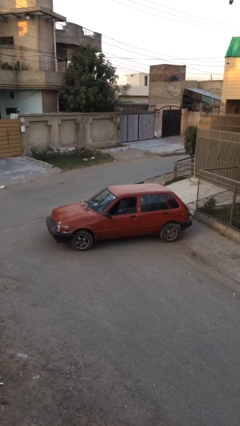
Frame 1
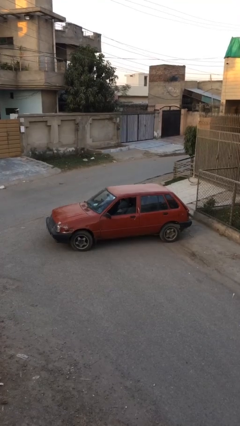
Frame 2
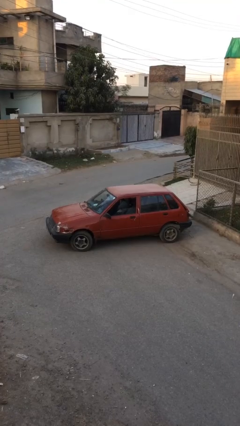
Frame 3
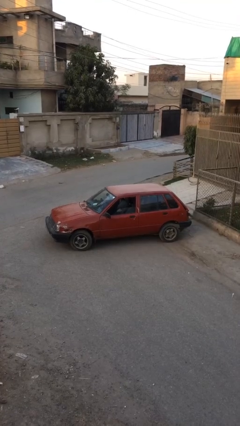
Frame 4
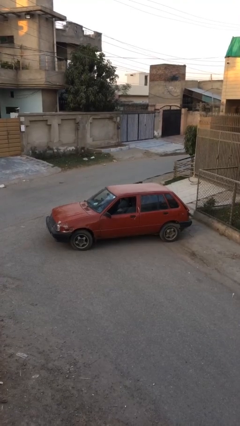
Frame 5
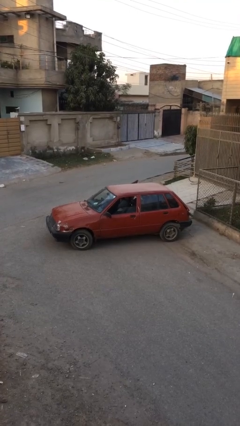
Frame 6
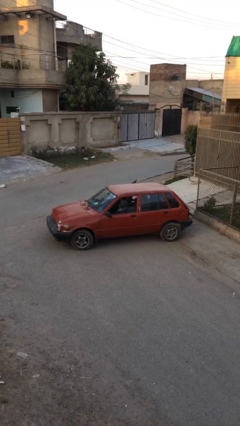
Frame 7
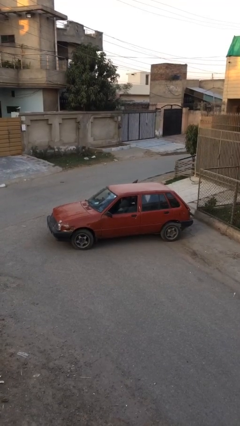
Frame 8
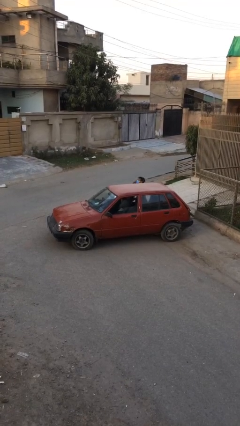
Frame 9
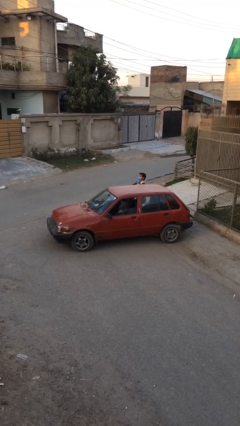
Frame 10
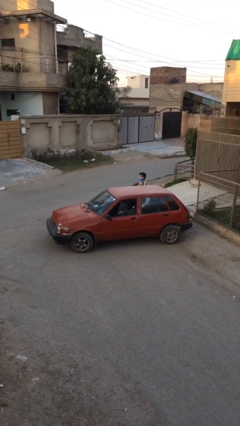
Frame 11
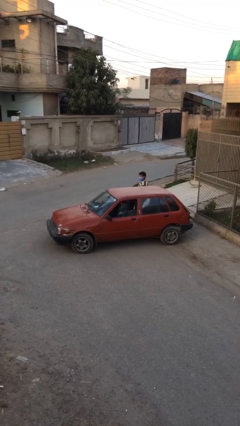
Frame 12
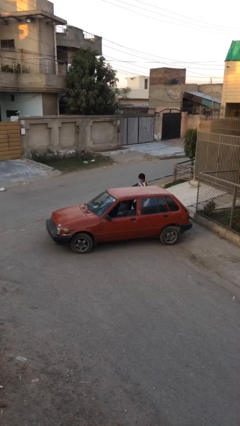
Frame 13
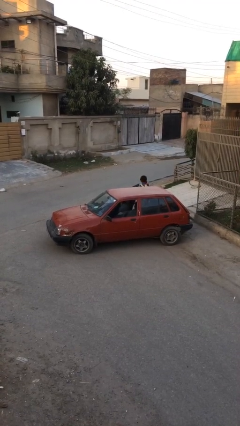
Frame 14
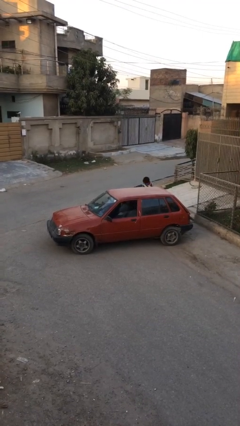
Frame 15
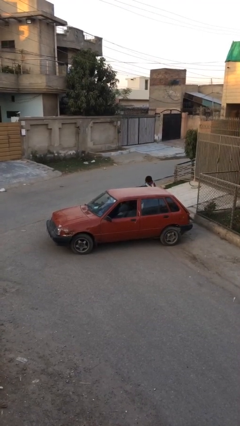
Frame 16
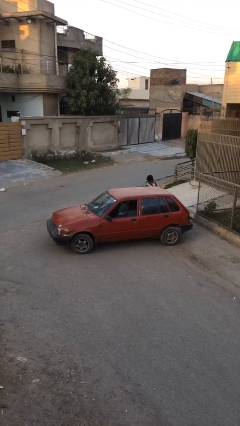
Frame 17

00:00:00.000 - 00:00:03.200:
car drops off person

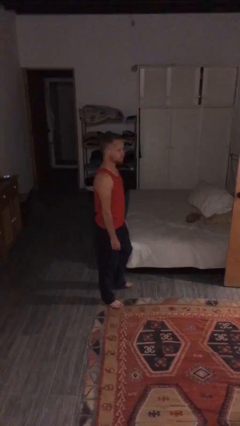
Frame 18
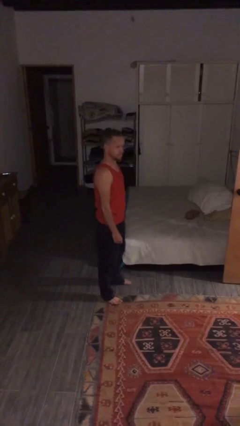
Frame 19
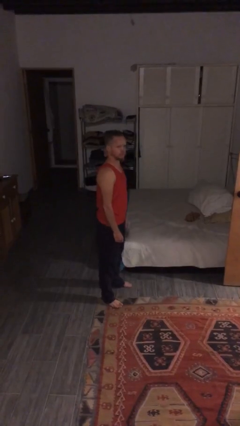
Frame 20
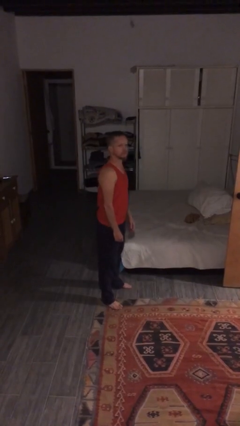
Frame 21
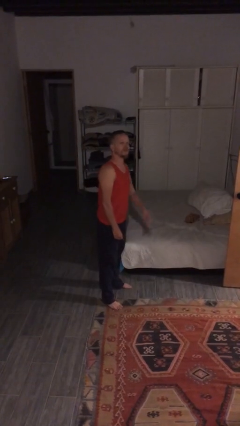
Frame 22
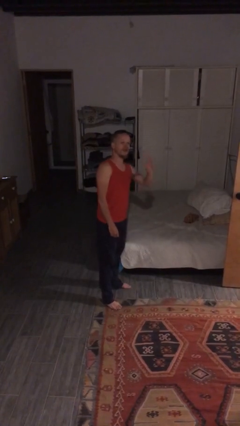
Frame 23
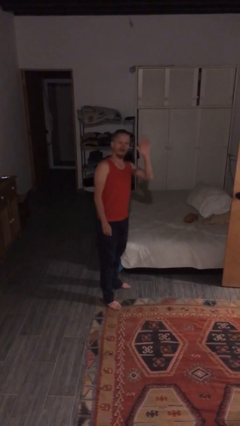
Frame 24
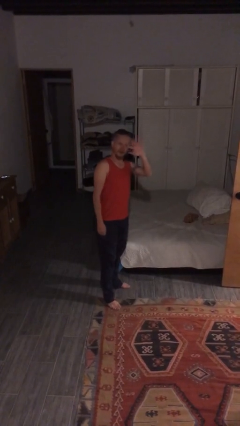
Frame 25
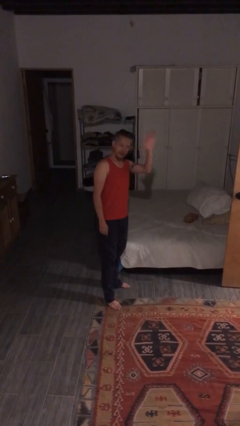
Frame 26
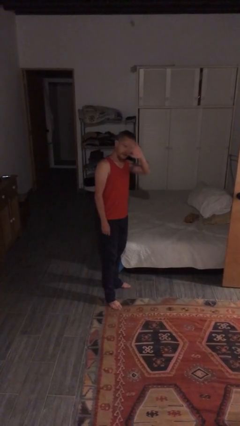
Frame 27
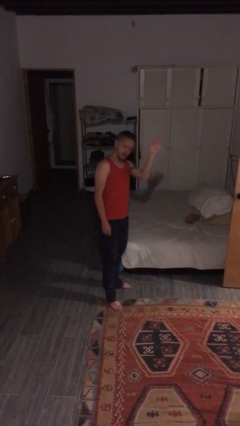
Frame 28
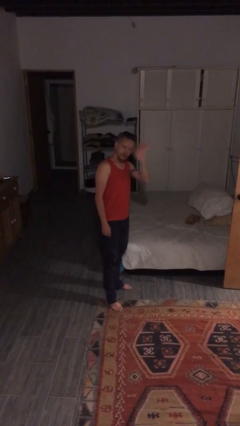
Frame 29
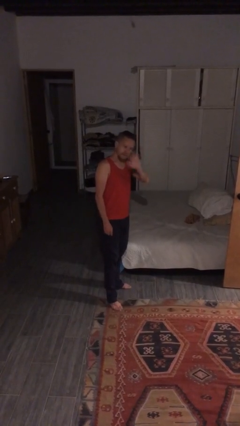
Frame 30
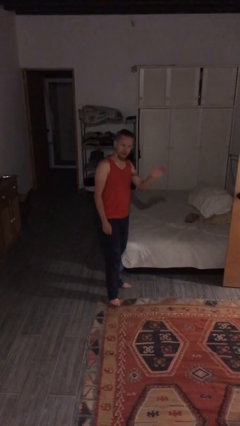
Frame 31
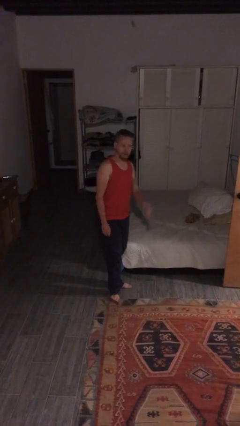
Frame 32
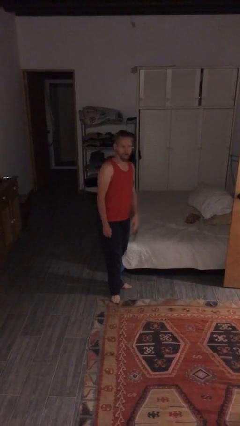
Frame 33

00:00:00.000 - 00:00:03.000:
person waves at person

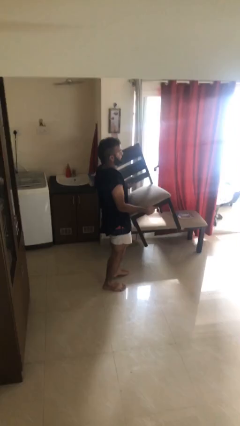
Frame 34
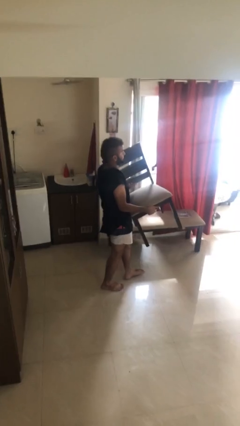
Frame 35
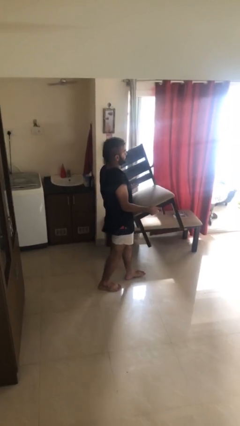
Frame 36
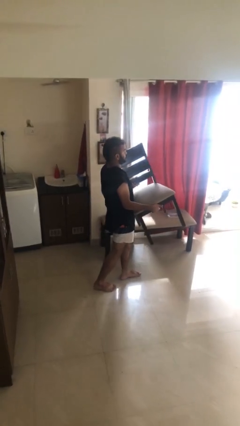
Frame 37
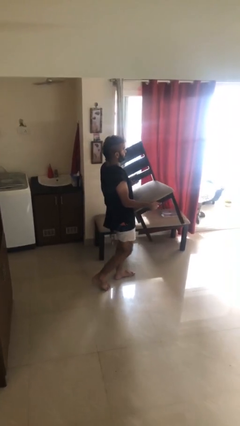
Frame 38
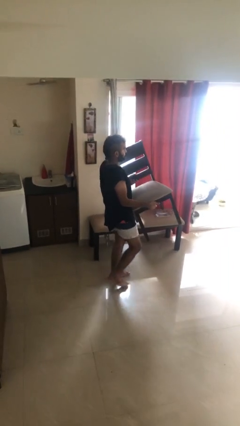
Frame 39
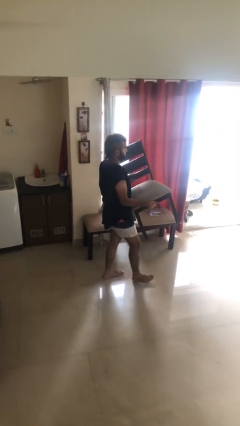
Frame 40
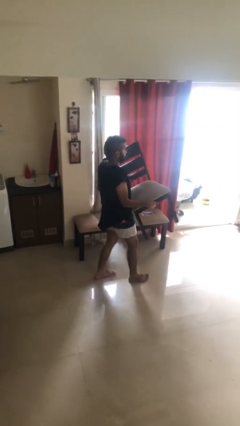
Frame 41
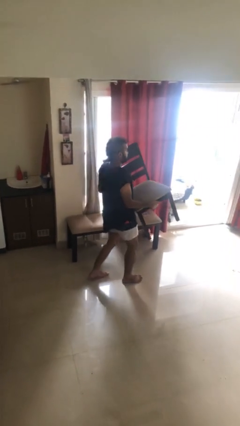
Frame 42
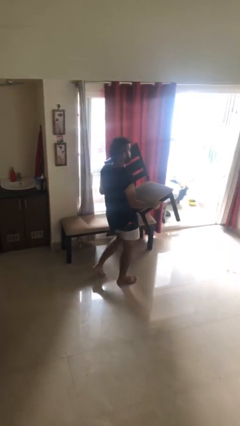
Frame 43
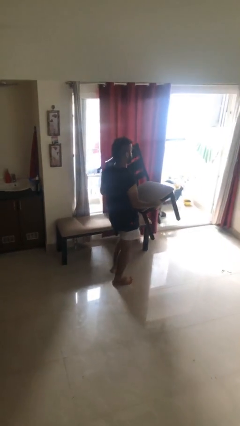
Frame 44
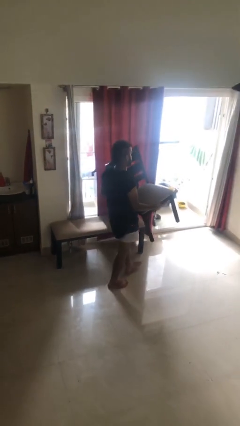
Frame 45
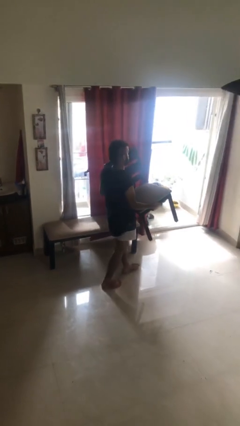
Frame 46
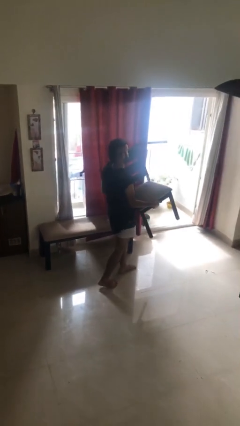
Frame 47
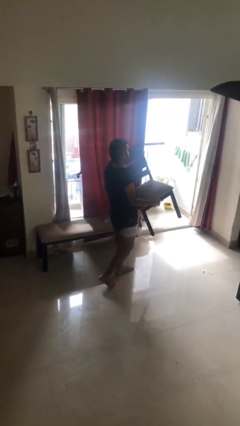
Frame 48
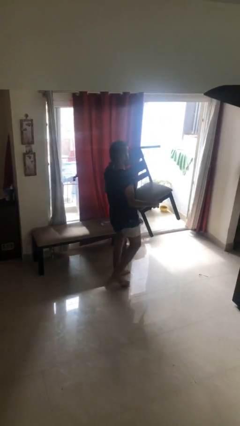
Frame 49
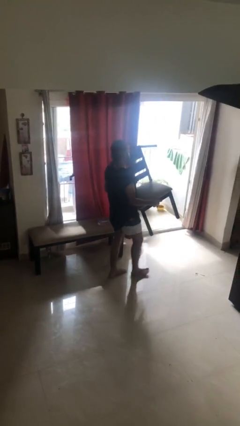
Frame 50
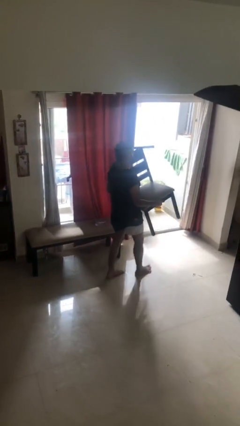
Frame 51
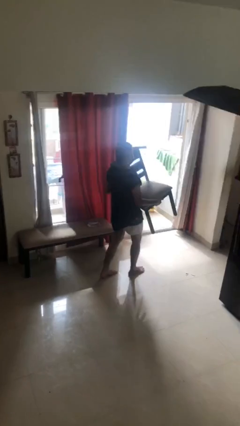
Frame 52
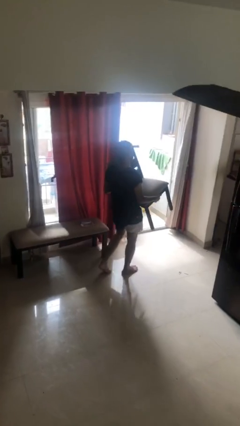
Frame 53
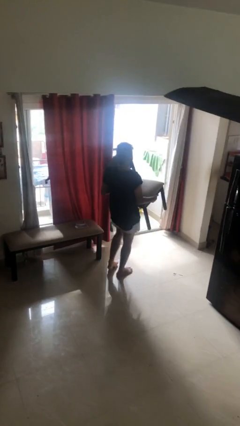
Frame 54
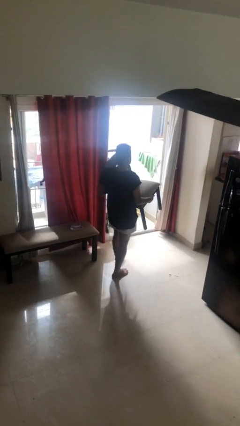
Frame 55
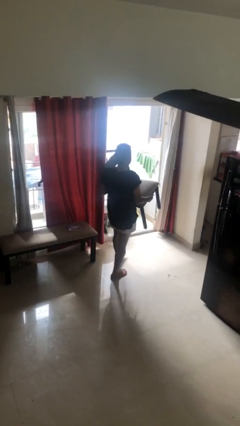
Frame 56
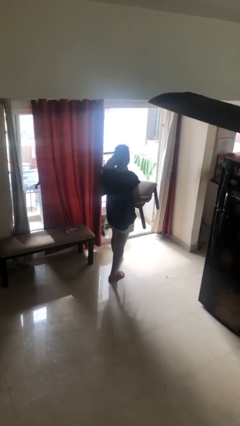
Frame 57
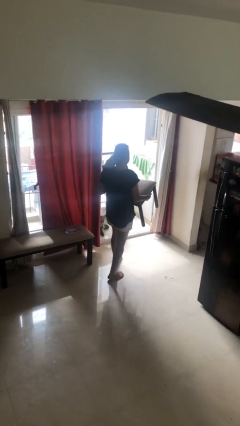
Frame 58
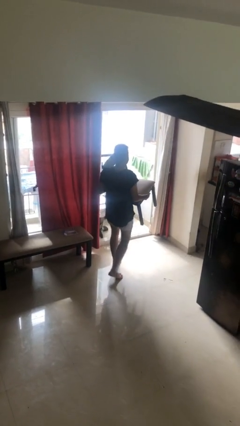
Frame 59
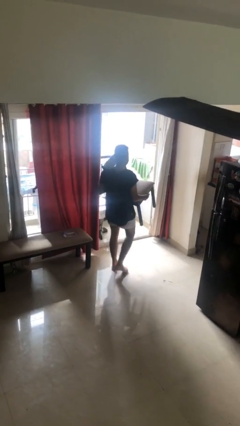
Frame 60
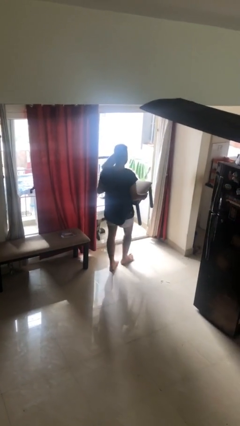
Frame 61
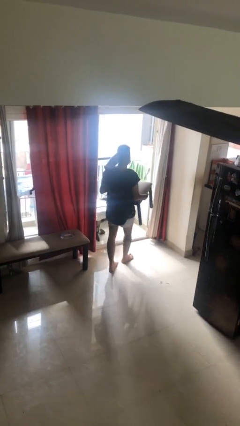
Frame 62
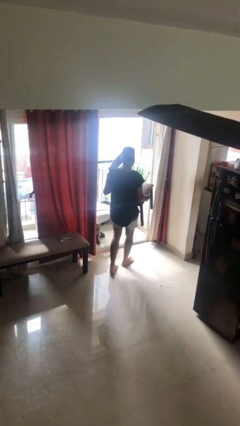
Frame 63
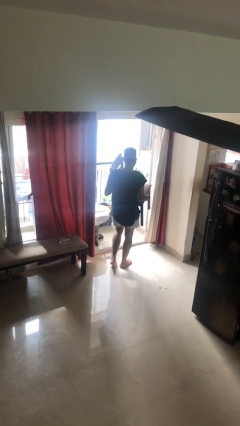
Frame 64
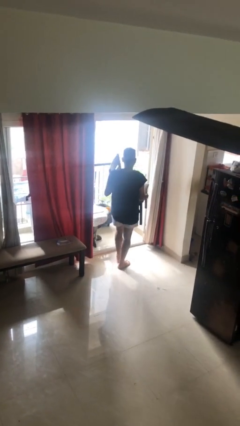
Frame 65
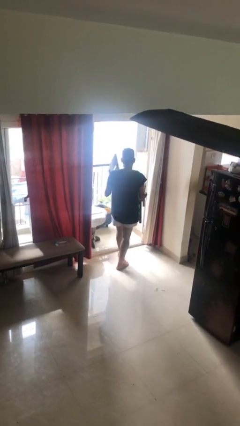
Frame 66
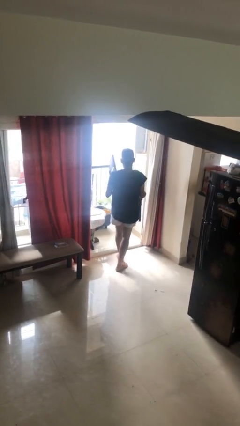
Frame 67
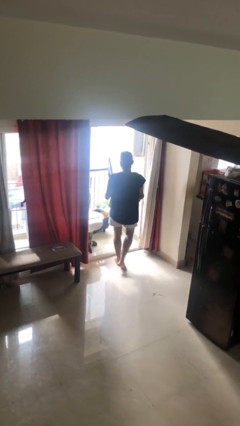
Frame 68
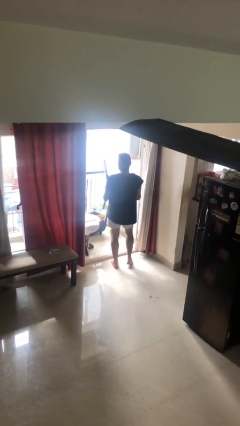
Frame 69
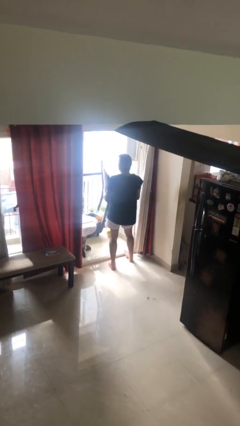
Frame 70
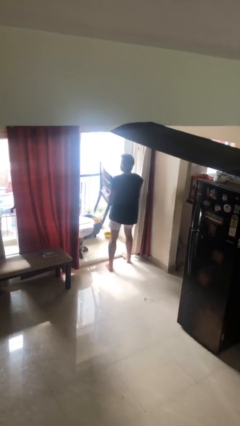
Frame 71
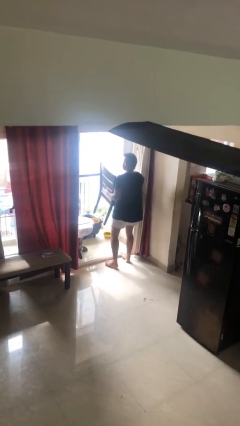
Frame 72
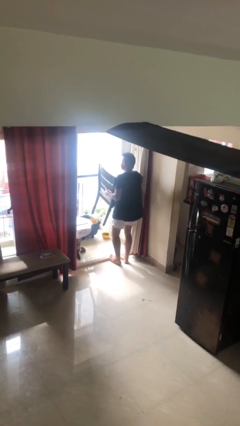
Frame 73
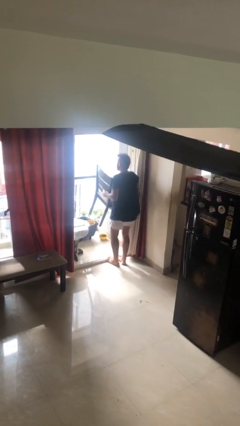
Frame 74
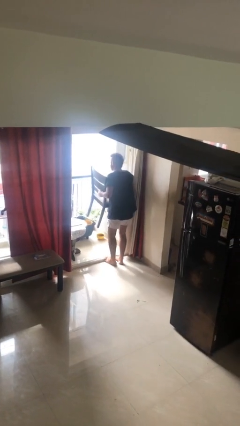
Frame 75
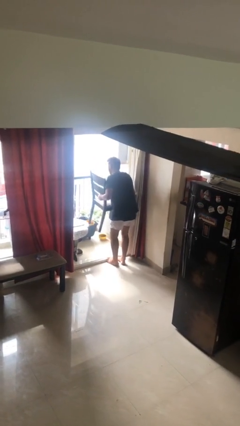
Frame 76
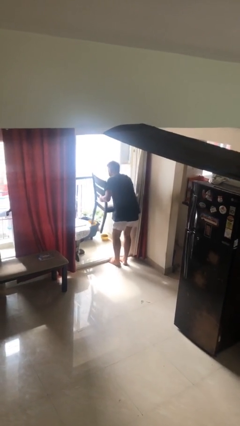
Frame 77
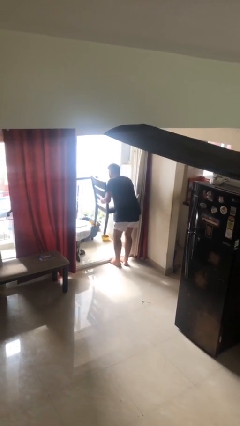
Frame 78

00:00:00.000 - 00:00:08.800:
person carries heavy object

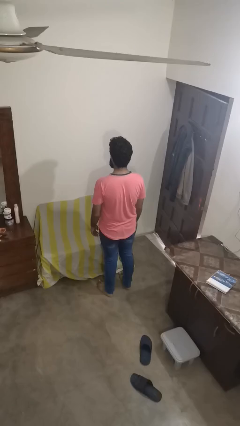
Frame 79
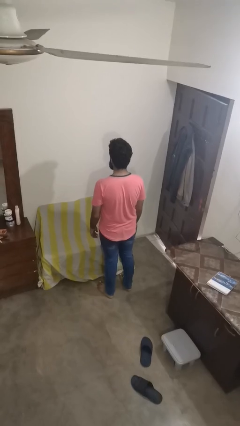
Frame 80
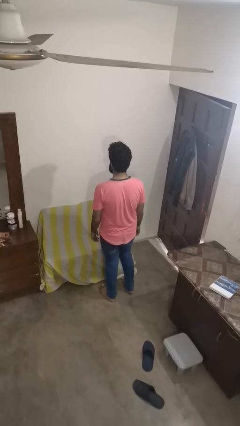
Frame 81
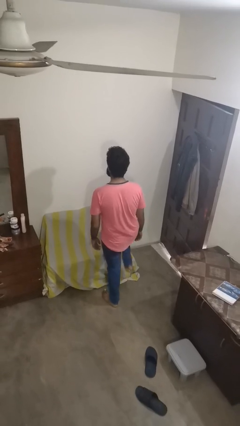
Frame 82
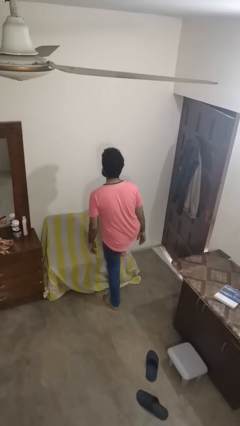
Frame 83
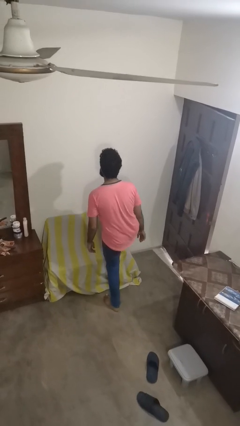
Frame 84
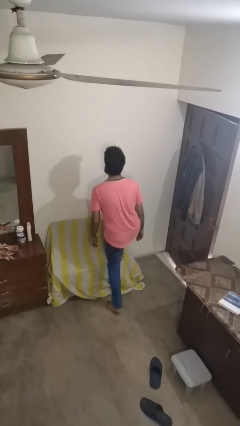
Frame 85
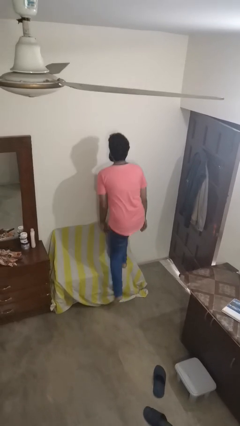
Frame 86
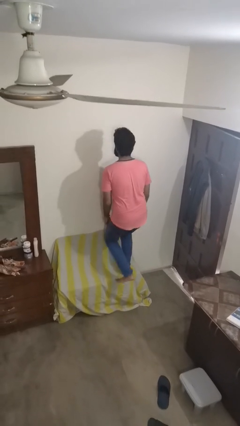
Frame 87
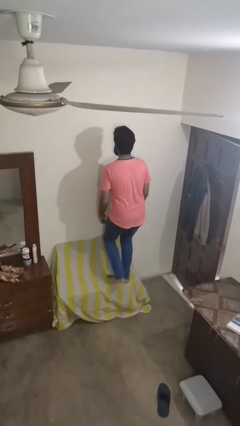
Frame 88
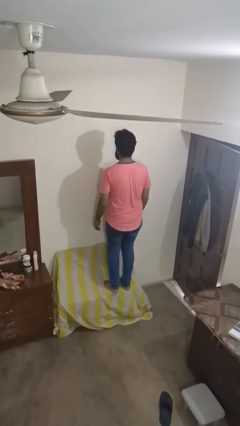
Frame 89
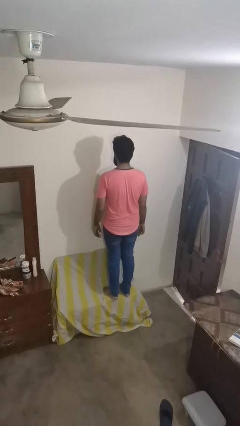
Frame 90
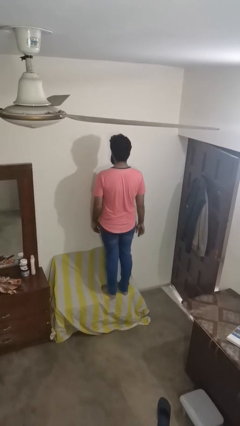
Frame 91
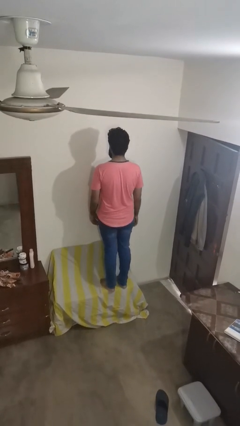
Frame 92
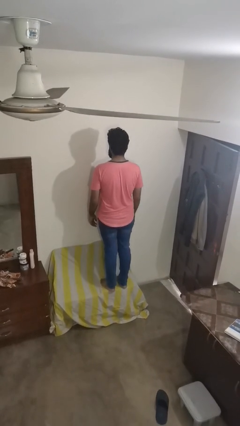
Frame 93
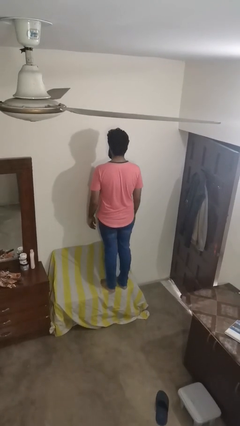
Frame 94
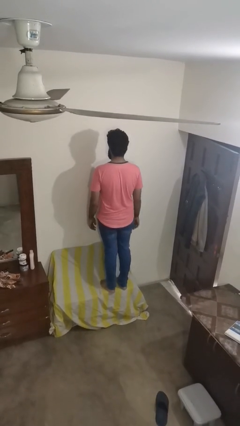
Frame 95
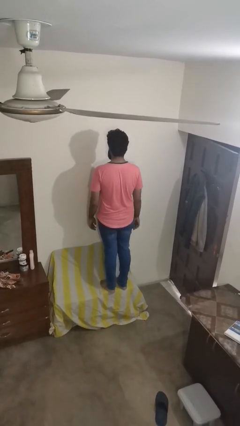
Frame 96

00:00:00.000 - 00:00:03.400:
person climbs on couch
